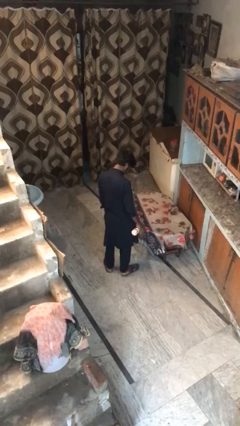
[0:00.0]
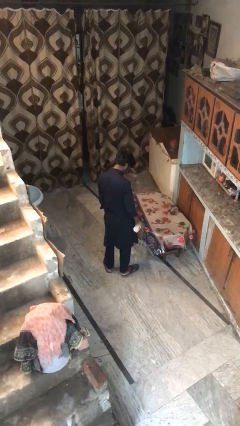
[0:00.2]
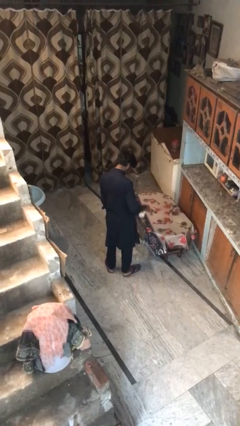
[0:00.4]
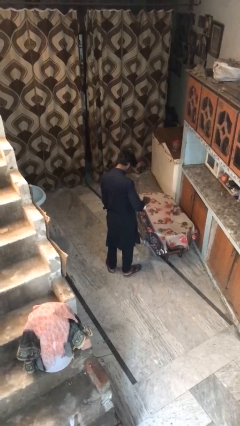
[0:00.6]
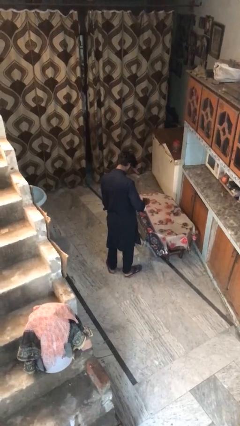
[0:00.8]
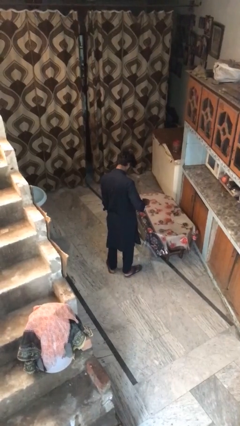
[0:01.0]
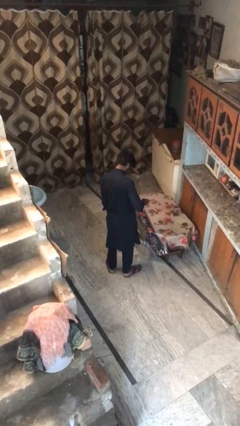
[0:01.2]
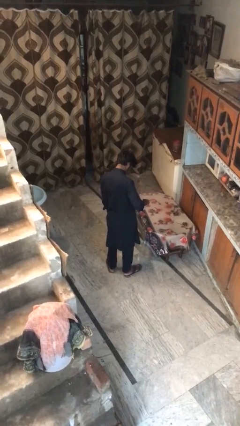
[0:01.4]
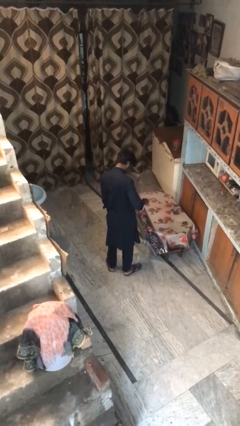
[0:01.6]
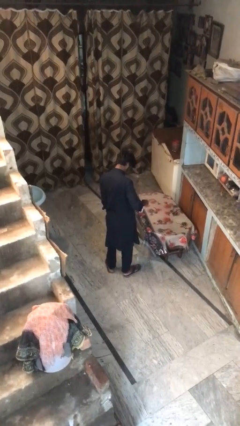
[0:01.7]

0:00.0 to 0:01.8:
person sprays from bottle

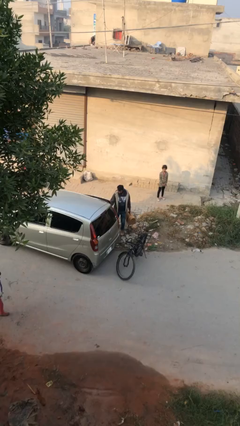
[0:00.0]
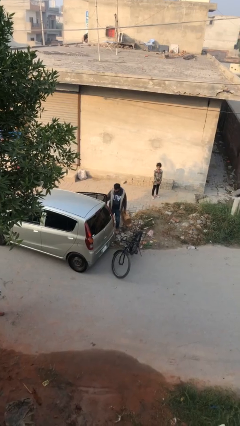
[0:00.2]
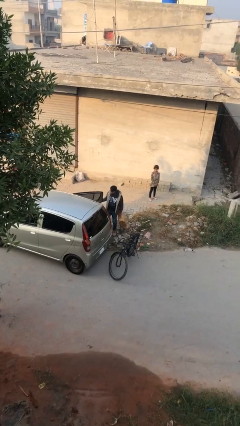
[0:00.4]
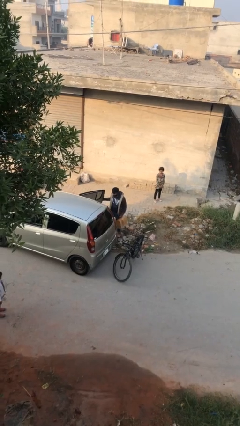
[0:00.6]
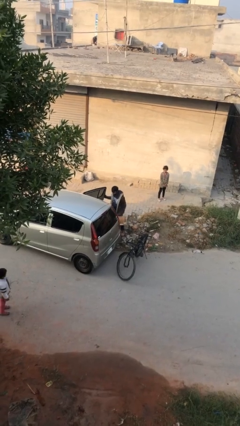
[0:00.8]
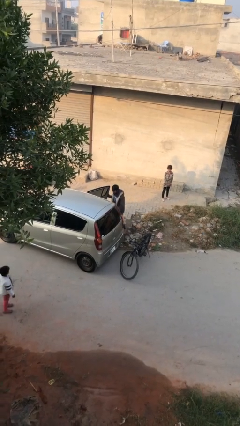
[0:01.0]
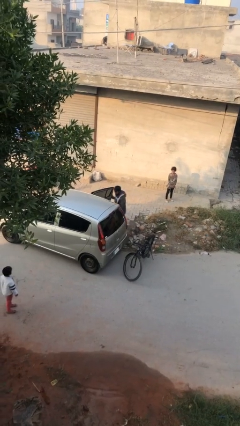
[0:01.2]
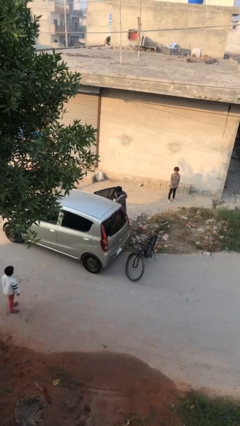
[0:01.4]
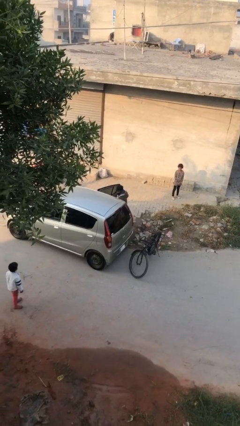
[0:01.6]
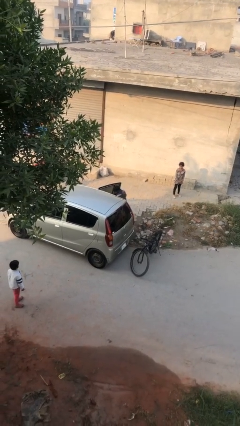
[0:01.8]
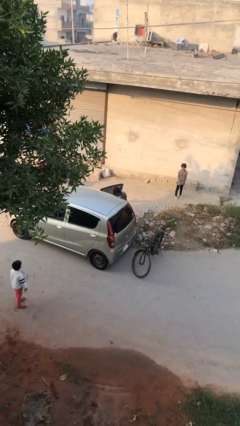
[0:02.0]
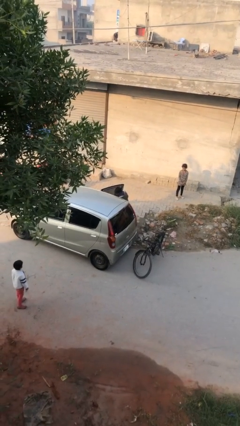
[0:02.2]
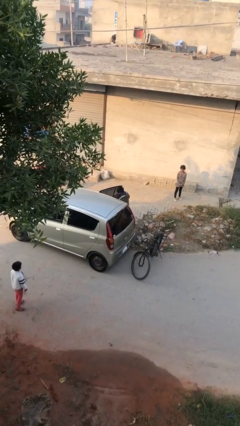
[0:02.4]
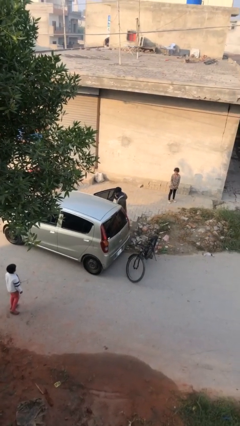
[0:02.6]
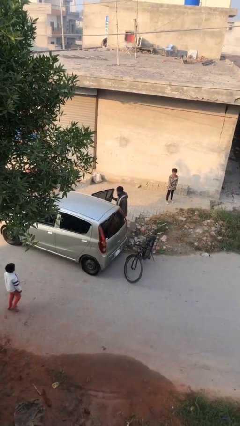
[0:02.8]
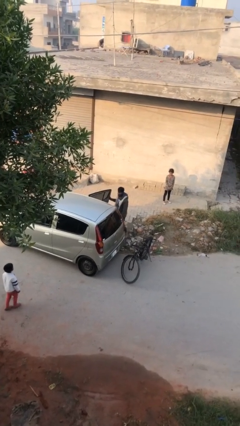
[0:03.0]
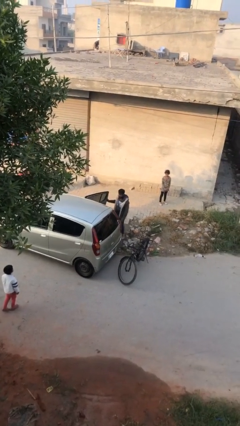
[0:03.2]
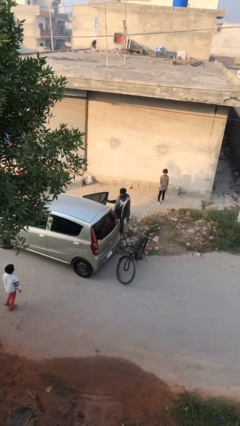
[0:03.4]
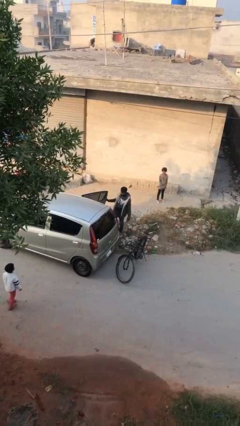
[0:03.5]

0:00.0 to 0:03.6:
person loads car

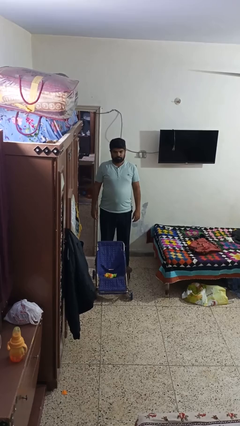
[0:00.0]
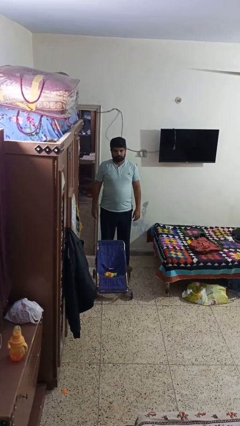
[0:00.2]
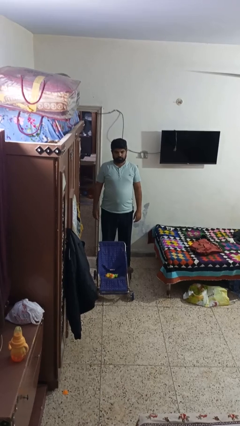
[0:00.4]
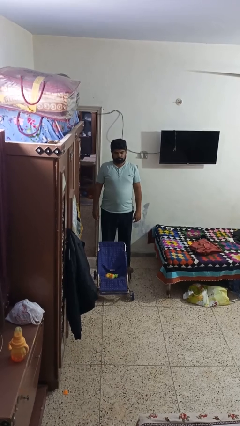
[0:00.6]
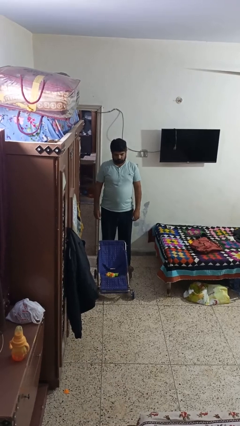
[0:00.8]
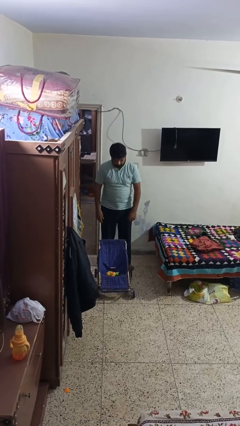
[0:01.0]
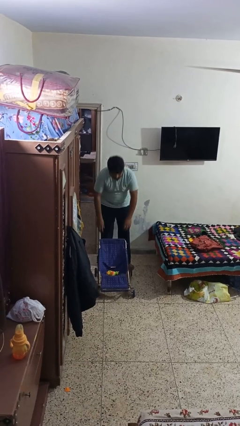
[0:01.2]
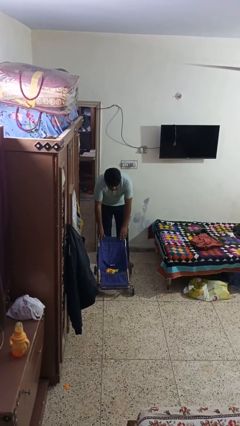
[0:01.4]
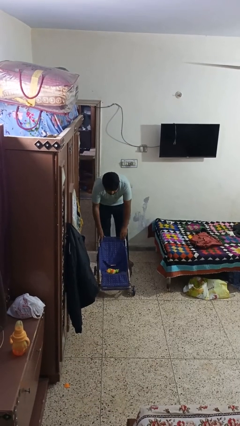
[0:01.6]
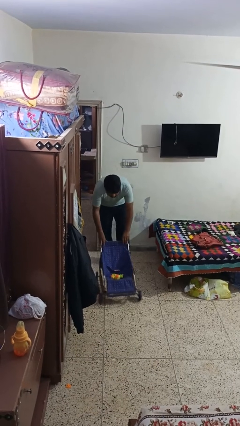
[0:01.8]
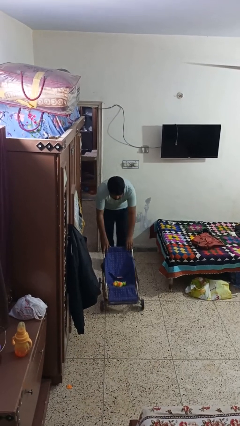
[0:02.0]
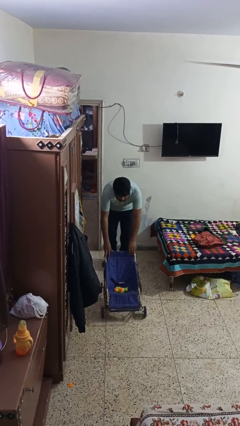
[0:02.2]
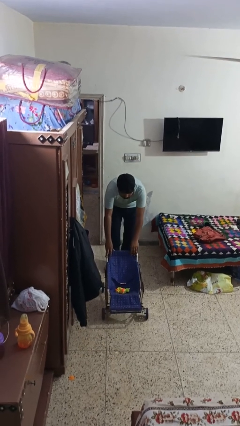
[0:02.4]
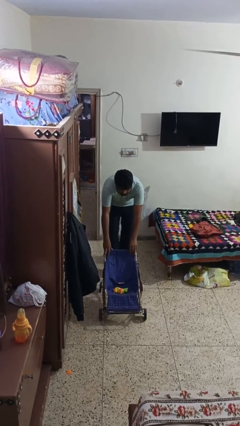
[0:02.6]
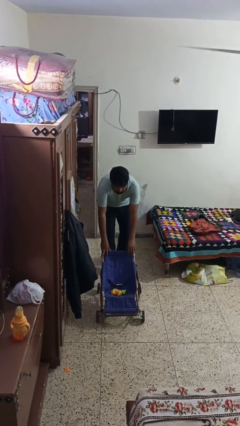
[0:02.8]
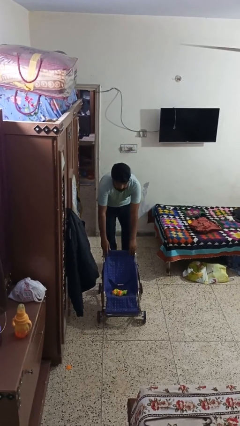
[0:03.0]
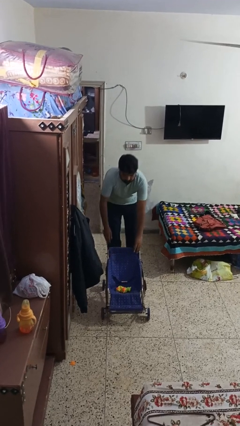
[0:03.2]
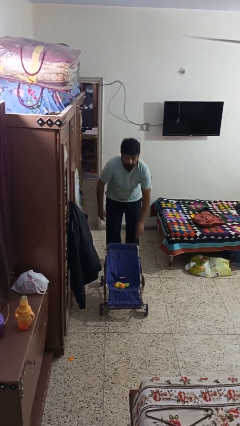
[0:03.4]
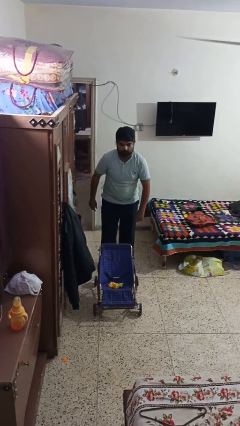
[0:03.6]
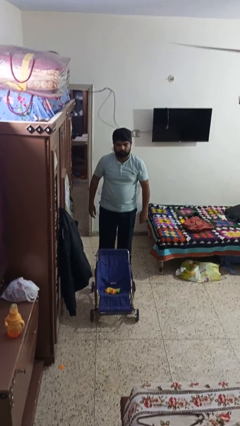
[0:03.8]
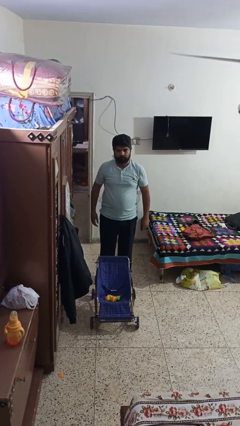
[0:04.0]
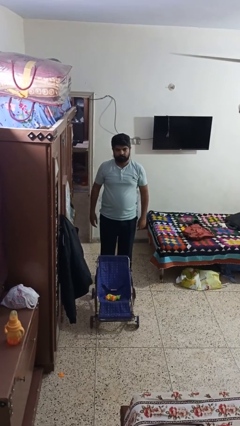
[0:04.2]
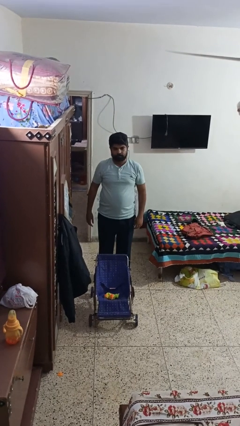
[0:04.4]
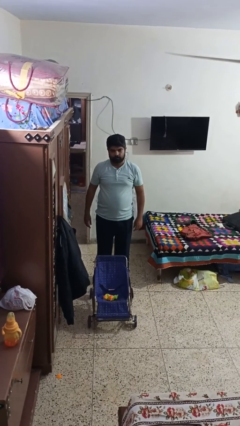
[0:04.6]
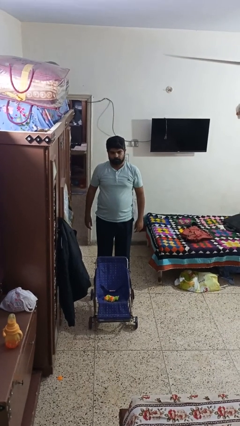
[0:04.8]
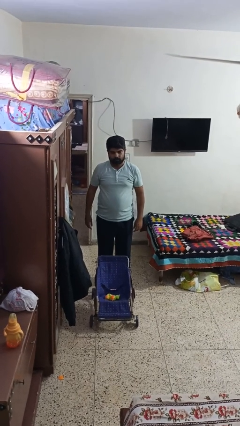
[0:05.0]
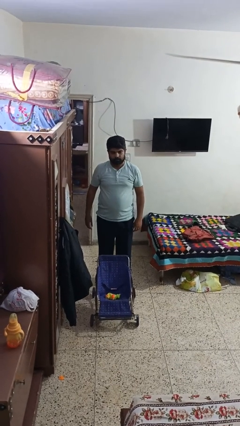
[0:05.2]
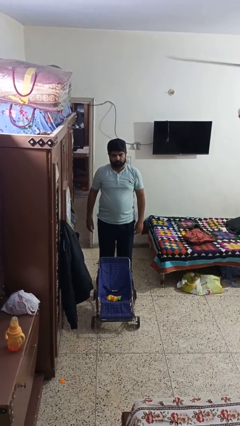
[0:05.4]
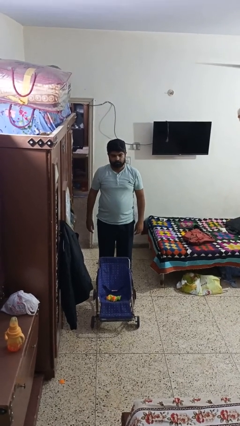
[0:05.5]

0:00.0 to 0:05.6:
person pushes wheeled cart

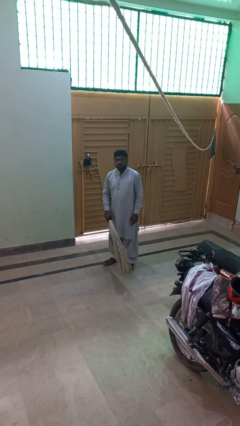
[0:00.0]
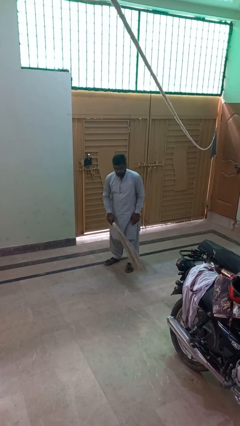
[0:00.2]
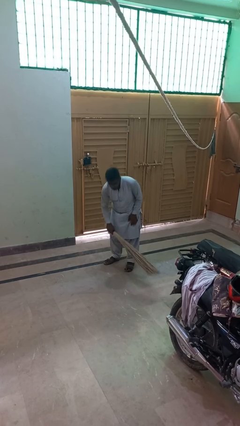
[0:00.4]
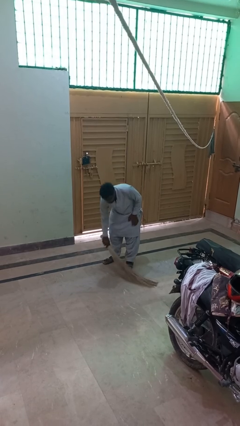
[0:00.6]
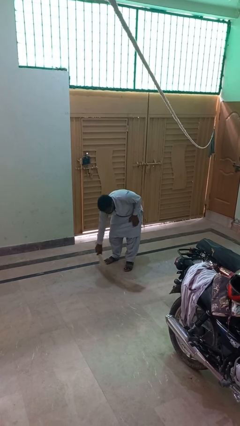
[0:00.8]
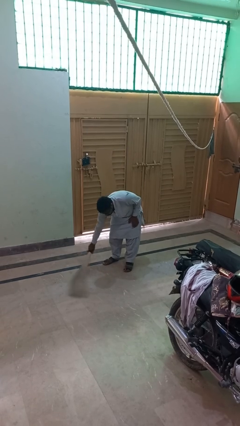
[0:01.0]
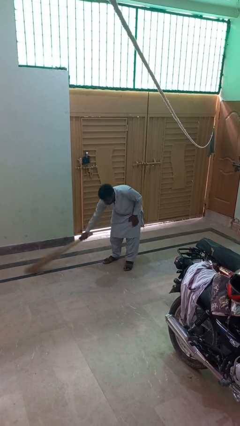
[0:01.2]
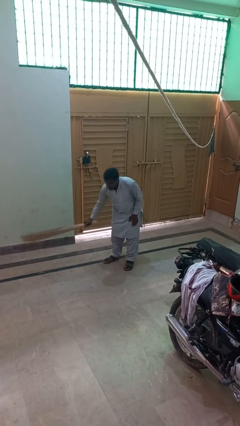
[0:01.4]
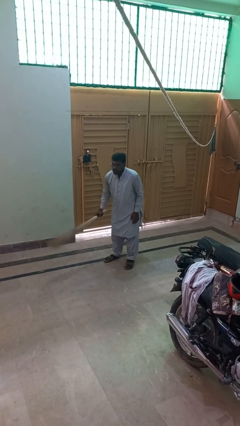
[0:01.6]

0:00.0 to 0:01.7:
person sweeps floor

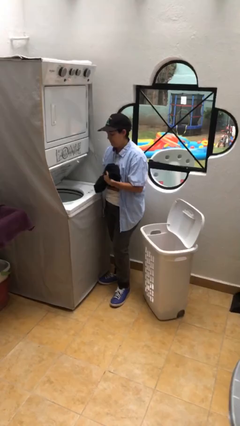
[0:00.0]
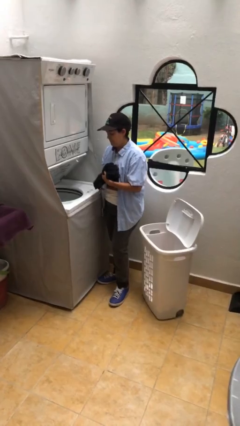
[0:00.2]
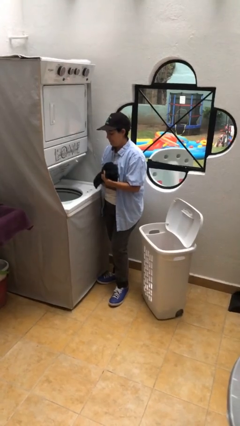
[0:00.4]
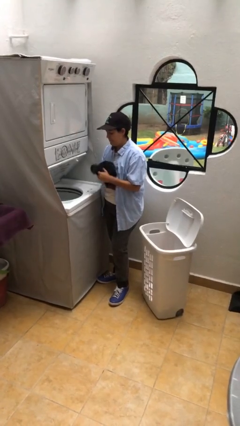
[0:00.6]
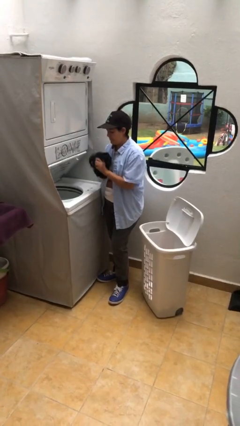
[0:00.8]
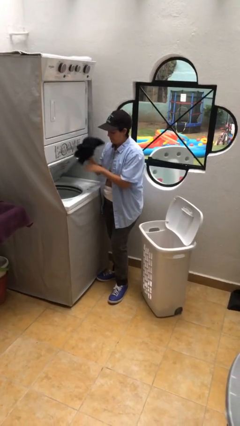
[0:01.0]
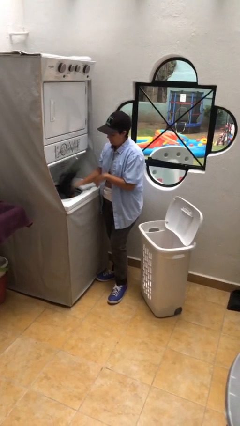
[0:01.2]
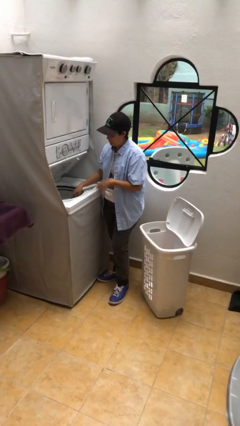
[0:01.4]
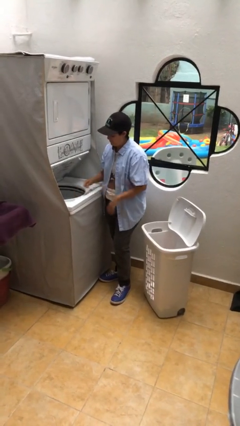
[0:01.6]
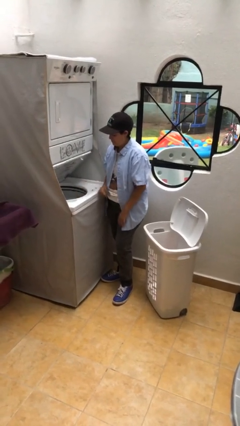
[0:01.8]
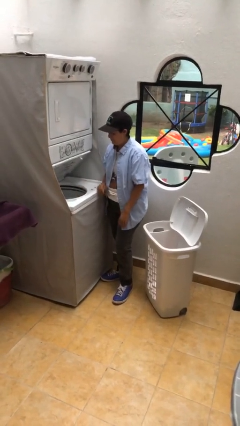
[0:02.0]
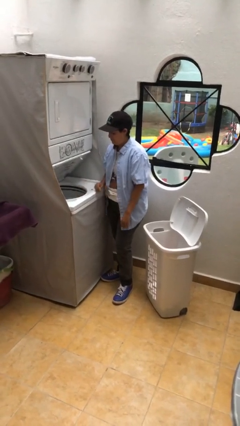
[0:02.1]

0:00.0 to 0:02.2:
person loads clotheswasher

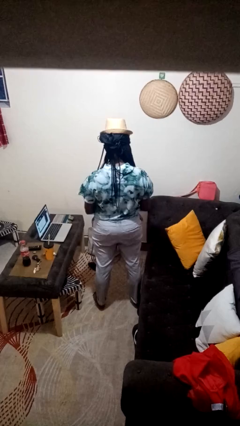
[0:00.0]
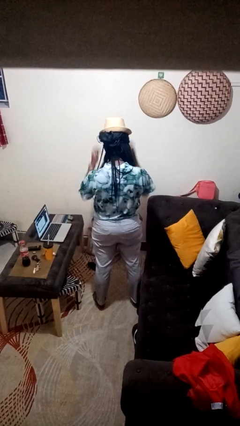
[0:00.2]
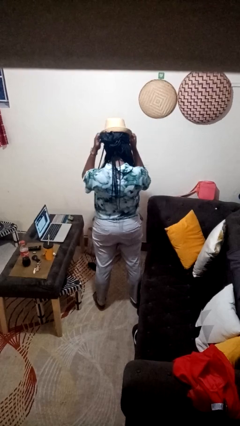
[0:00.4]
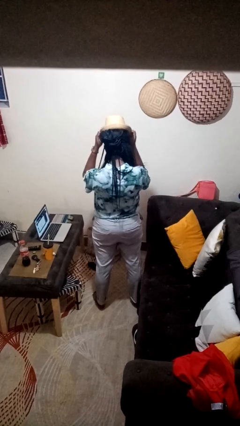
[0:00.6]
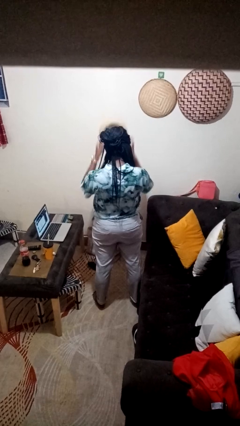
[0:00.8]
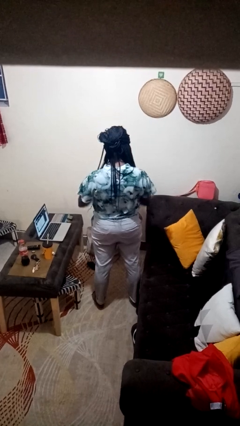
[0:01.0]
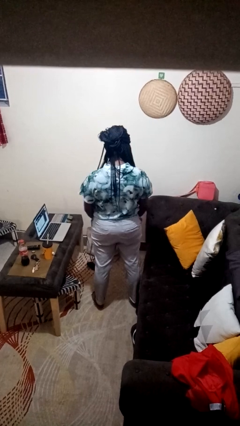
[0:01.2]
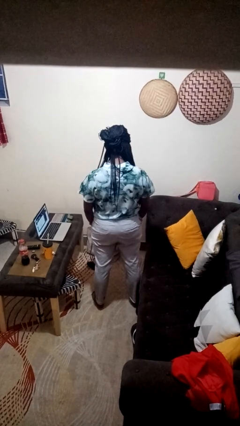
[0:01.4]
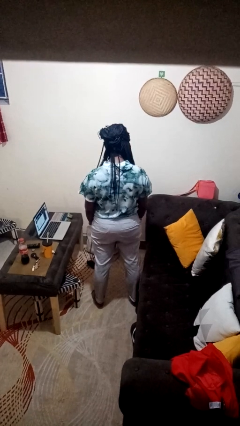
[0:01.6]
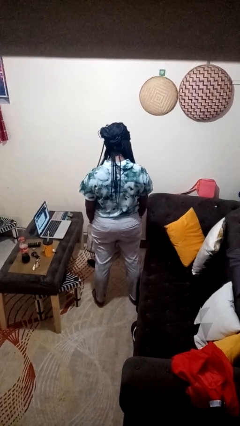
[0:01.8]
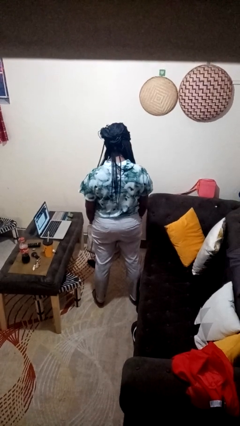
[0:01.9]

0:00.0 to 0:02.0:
person takes off hat
